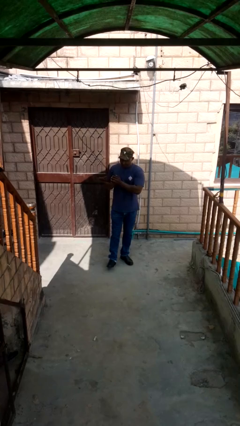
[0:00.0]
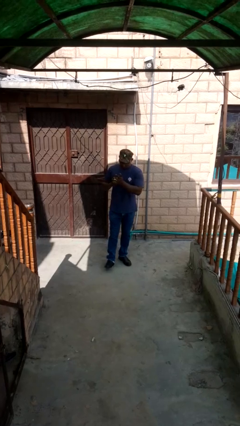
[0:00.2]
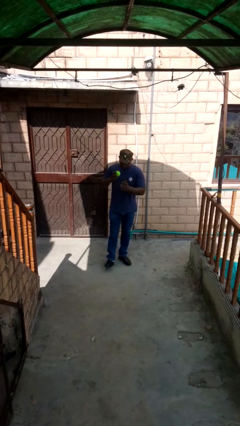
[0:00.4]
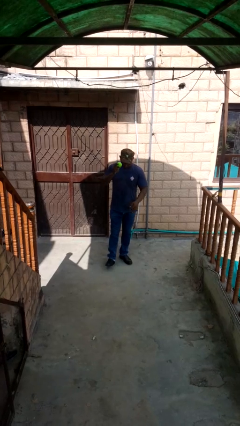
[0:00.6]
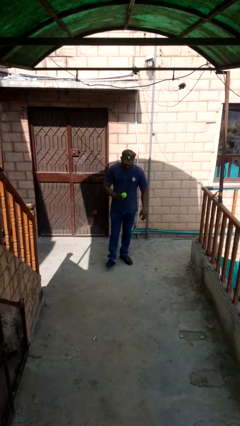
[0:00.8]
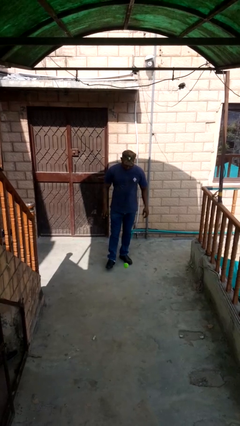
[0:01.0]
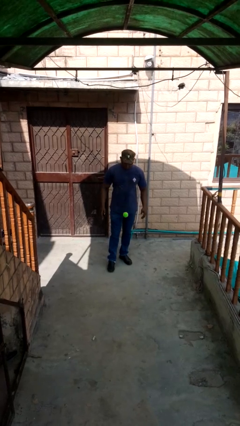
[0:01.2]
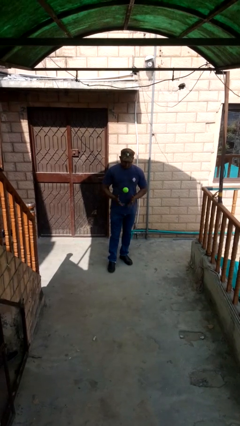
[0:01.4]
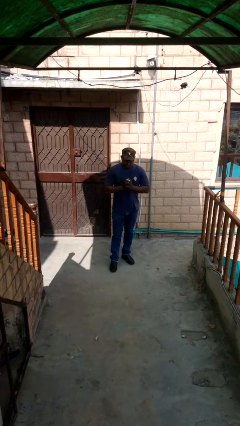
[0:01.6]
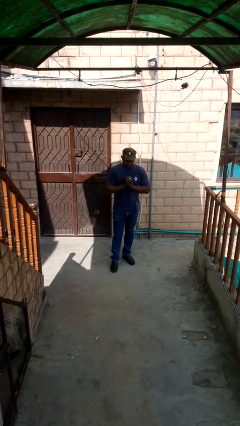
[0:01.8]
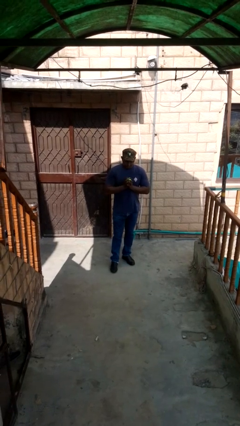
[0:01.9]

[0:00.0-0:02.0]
person bounces ball on floor

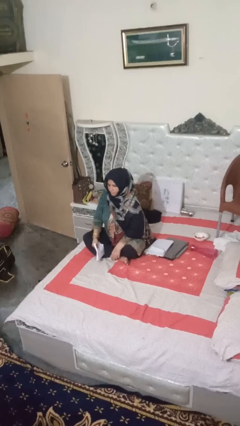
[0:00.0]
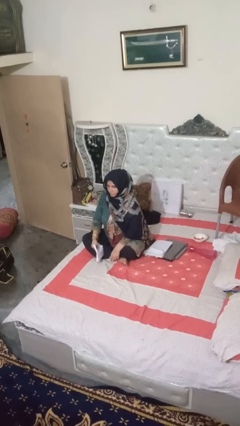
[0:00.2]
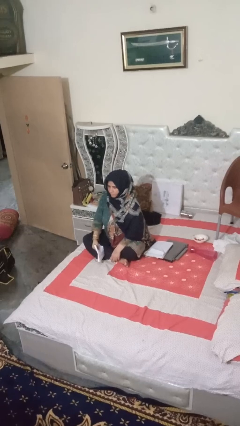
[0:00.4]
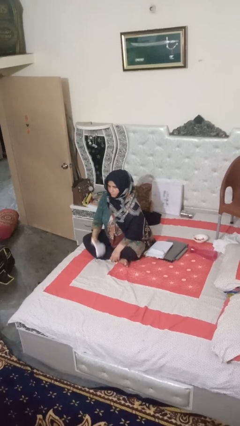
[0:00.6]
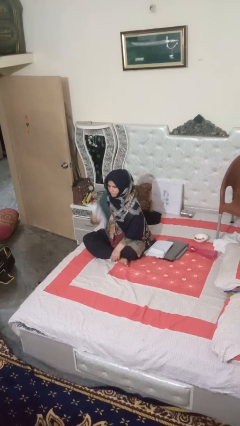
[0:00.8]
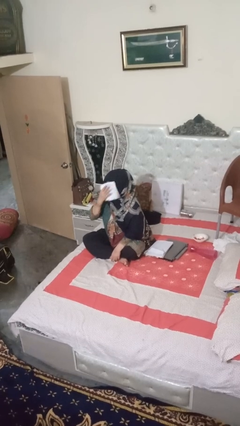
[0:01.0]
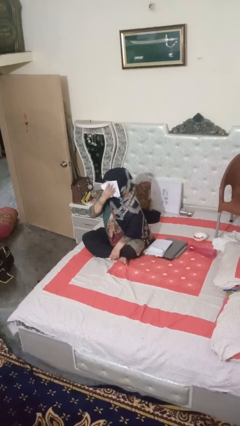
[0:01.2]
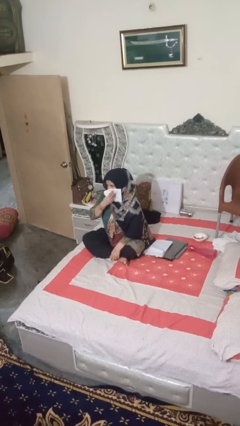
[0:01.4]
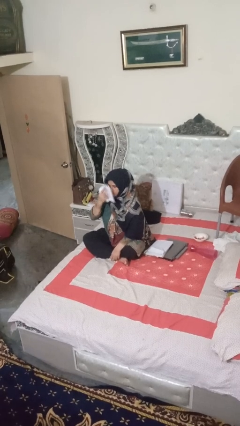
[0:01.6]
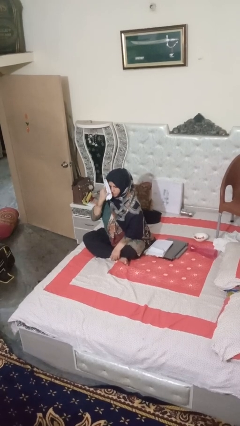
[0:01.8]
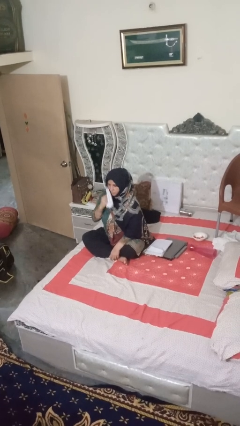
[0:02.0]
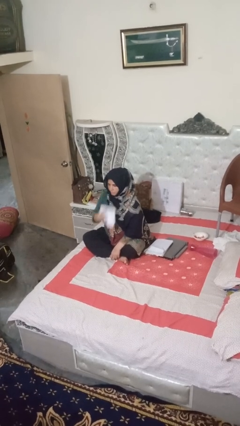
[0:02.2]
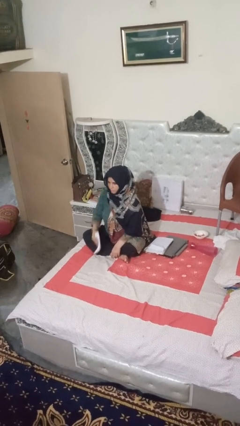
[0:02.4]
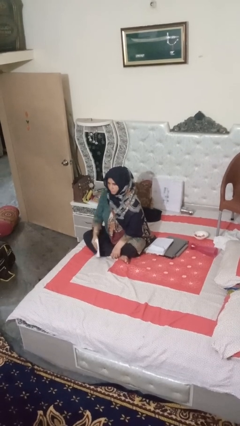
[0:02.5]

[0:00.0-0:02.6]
person wipes mouth with napkin

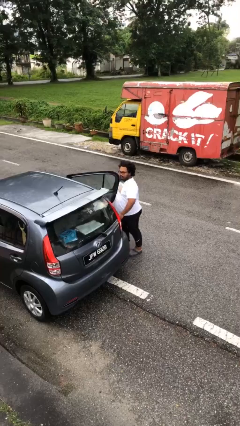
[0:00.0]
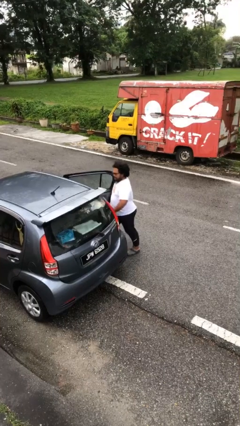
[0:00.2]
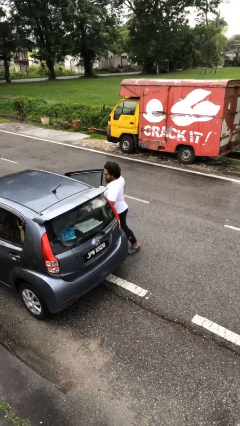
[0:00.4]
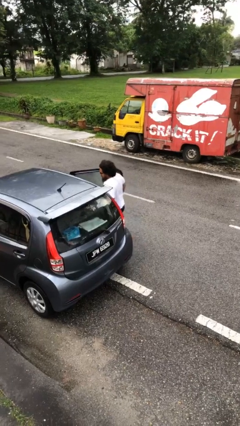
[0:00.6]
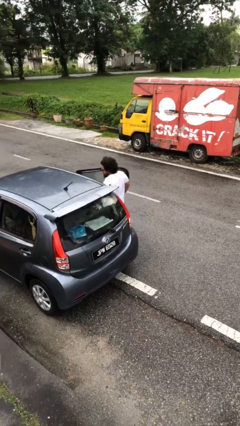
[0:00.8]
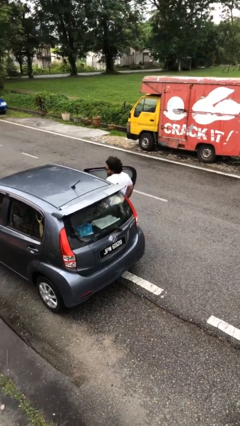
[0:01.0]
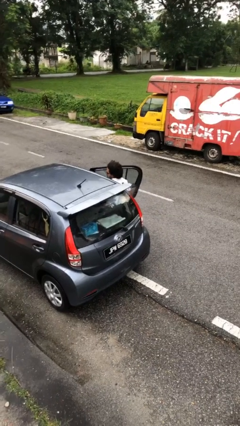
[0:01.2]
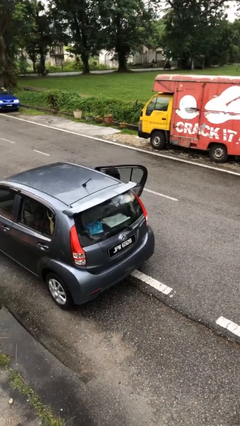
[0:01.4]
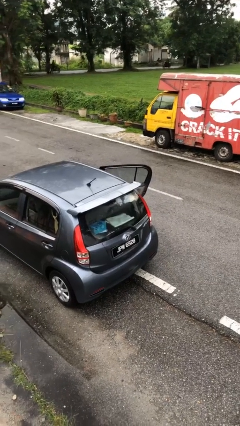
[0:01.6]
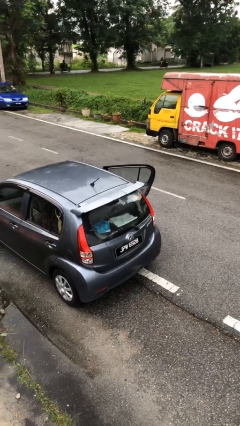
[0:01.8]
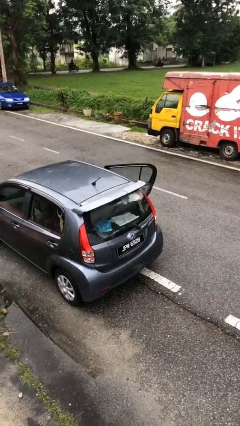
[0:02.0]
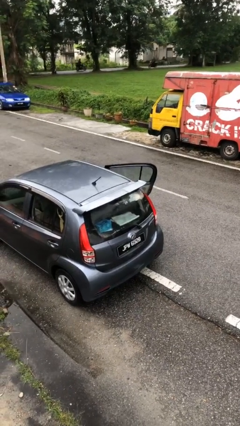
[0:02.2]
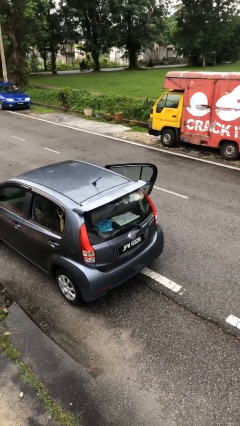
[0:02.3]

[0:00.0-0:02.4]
person enters car

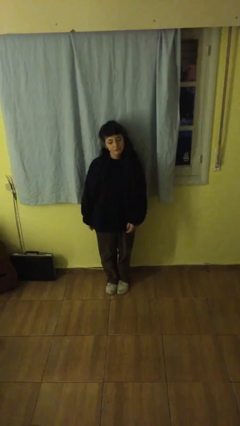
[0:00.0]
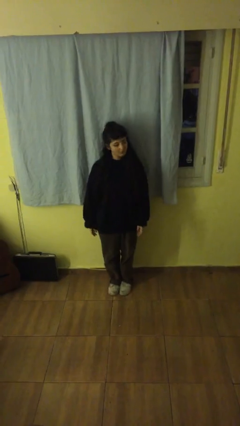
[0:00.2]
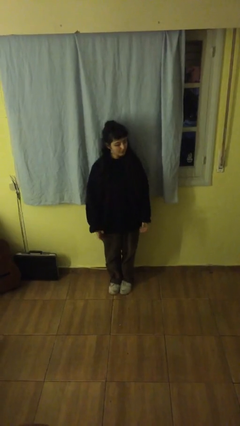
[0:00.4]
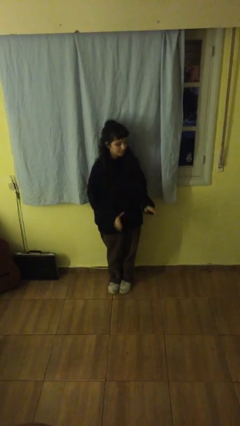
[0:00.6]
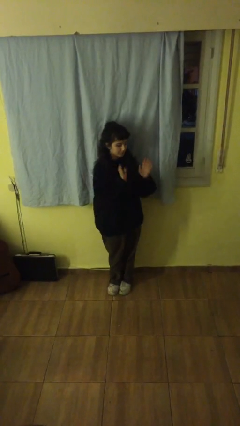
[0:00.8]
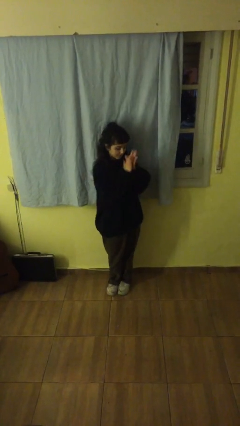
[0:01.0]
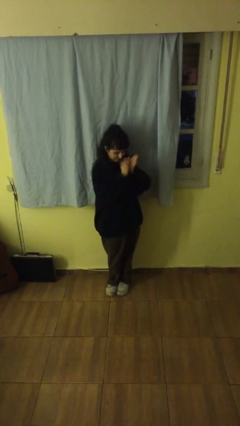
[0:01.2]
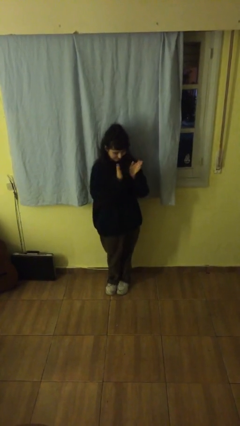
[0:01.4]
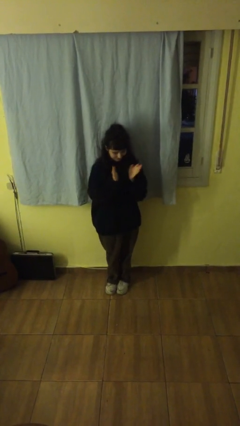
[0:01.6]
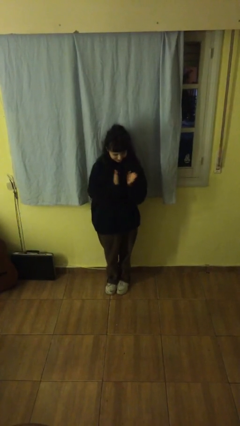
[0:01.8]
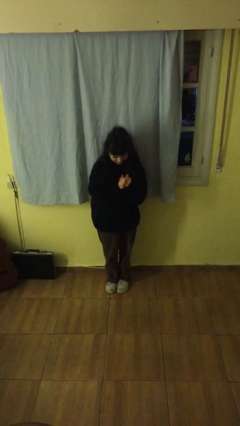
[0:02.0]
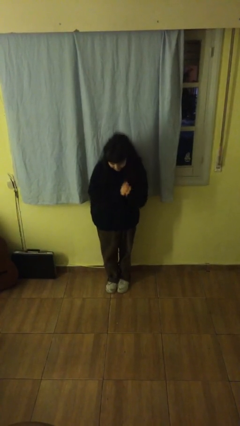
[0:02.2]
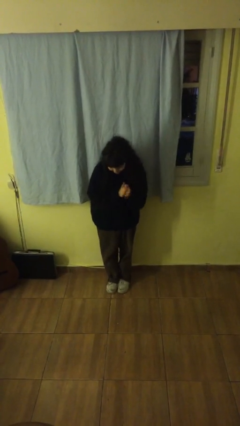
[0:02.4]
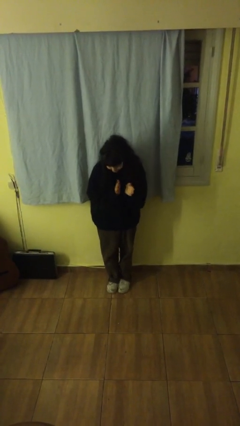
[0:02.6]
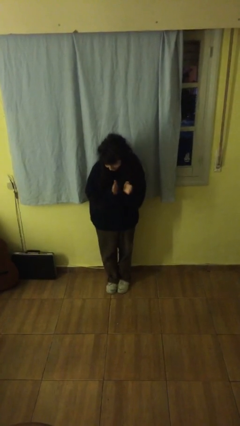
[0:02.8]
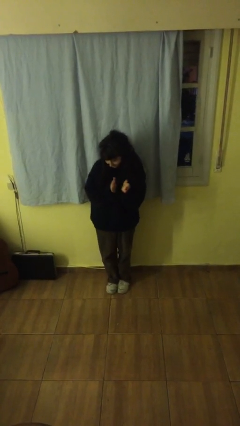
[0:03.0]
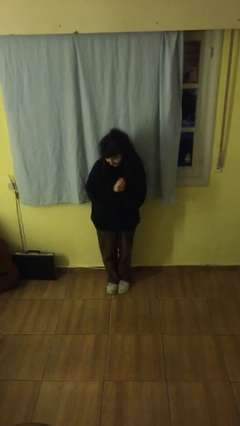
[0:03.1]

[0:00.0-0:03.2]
person claps hands

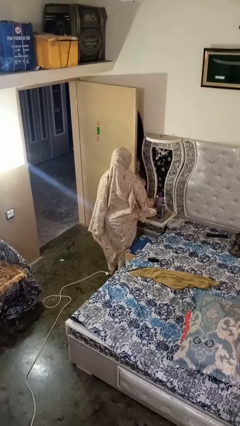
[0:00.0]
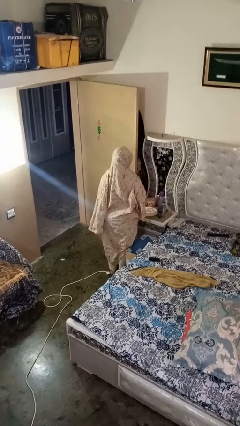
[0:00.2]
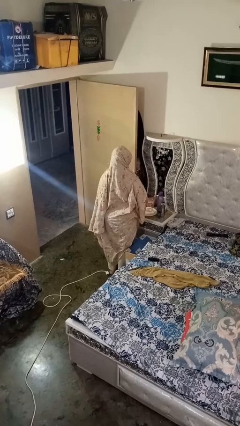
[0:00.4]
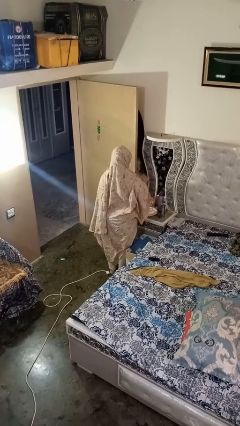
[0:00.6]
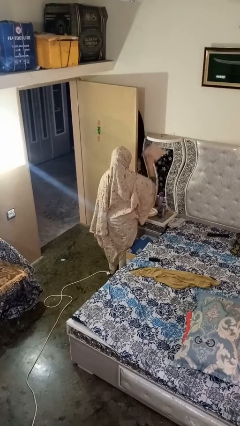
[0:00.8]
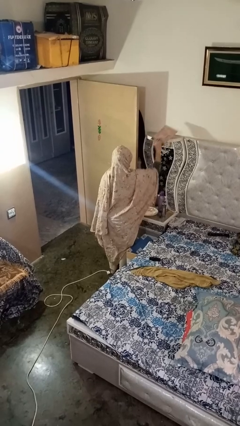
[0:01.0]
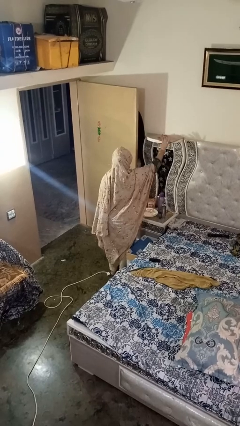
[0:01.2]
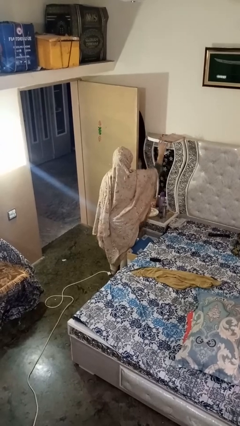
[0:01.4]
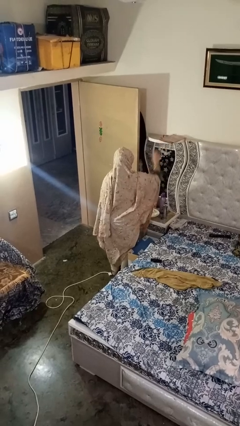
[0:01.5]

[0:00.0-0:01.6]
person puts down object on shelf

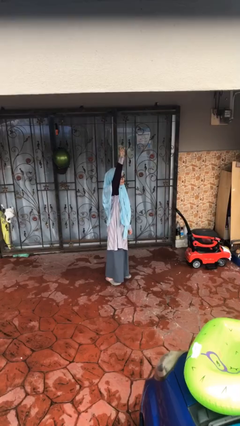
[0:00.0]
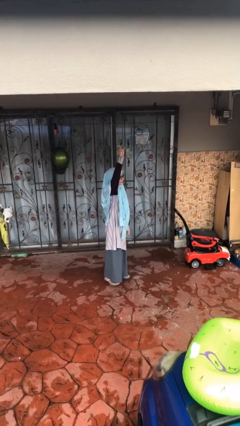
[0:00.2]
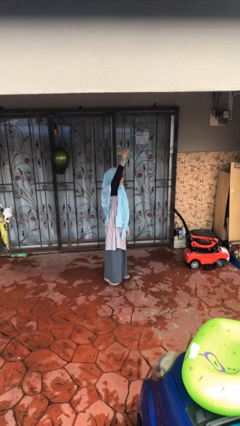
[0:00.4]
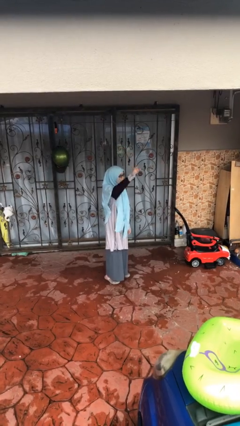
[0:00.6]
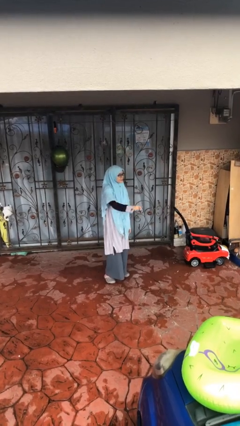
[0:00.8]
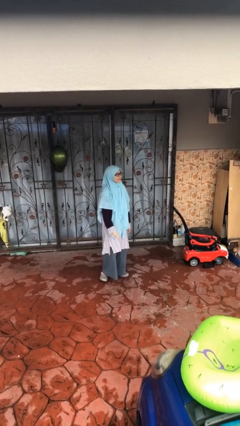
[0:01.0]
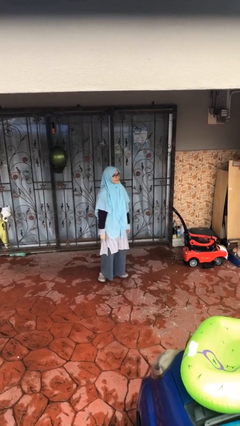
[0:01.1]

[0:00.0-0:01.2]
person gestures lower hand

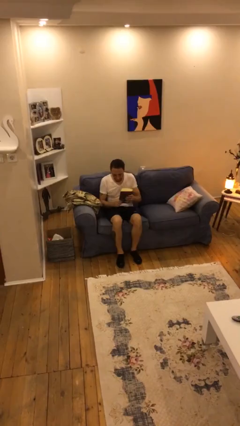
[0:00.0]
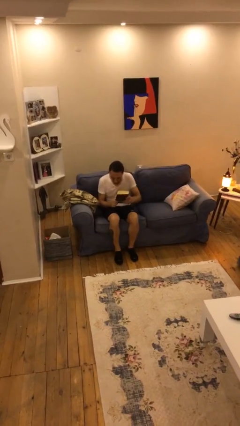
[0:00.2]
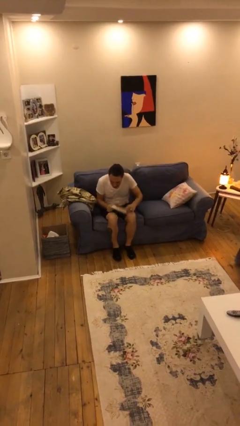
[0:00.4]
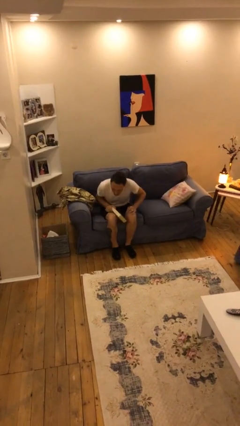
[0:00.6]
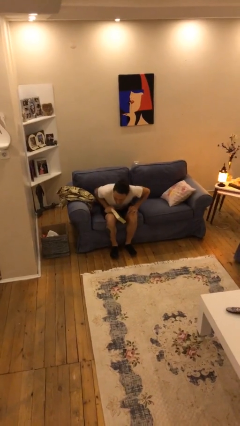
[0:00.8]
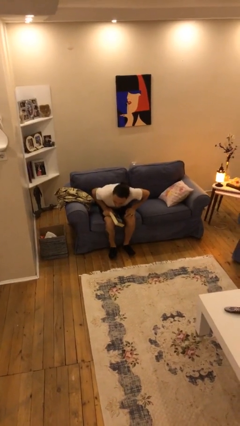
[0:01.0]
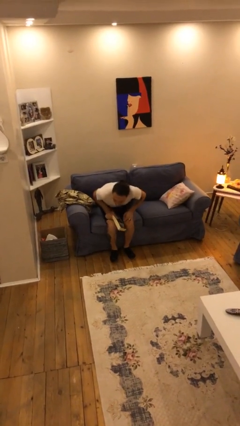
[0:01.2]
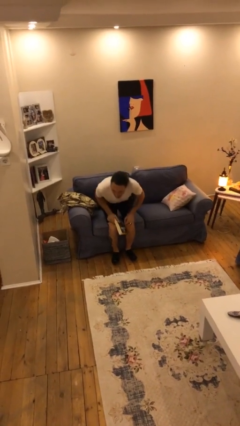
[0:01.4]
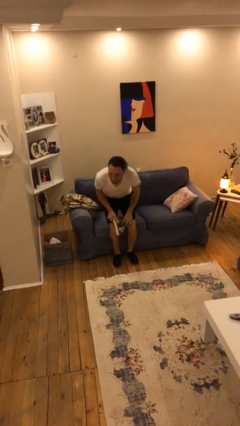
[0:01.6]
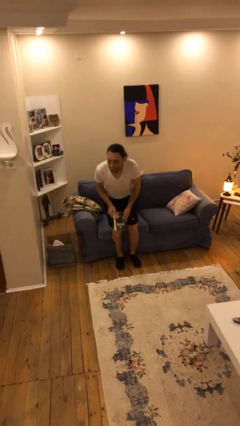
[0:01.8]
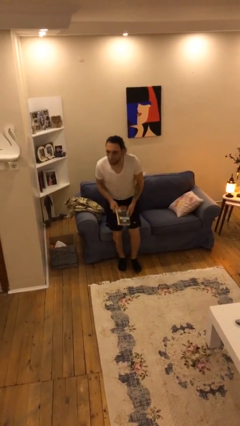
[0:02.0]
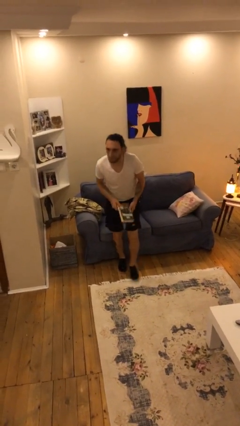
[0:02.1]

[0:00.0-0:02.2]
person stands up

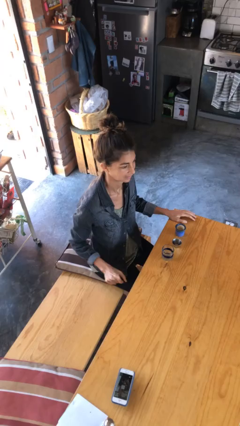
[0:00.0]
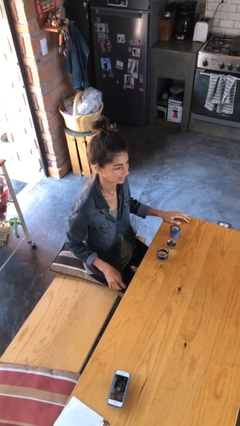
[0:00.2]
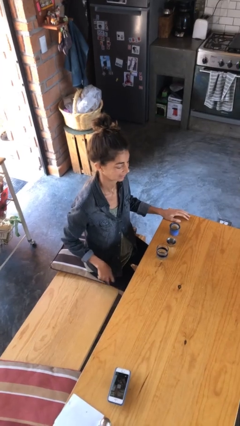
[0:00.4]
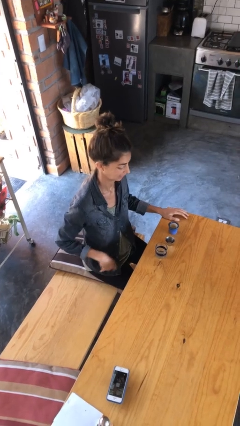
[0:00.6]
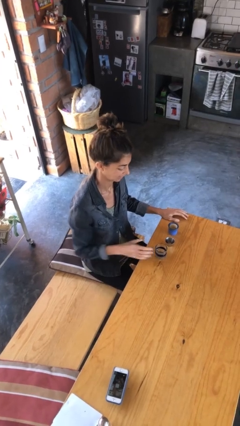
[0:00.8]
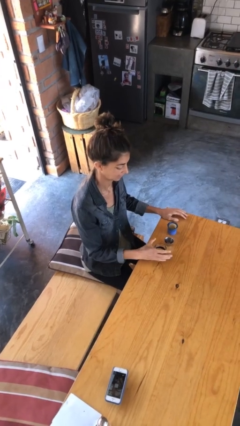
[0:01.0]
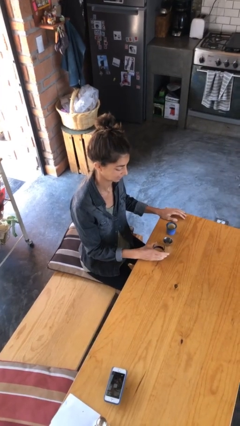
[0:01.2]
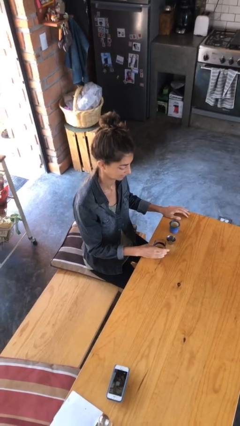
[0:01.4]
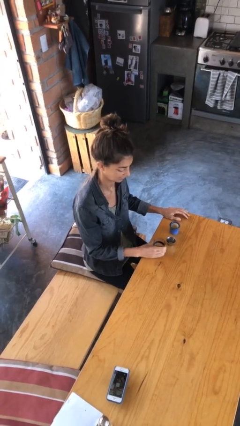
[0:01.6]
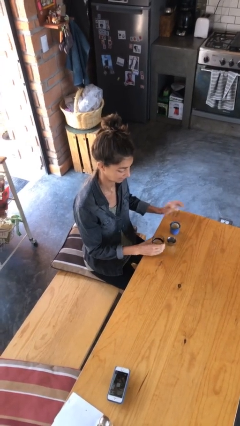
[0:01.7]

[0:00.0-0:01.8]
person picks up object from table
